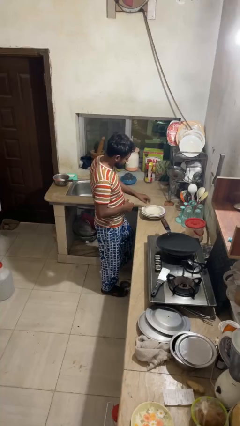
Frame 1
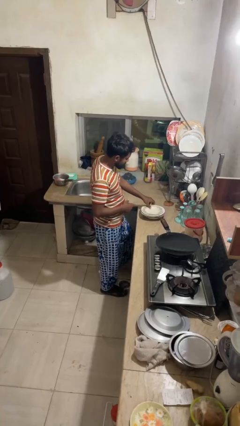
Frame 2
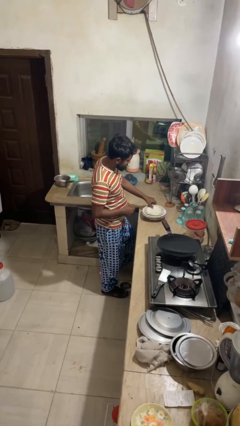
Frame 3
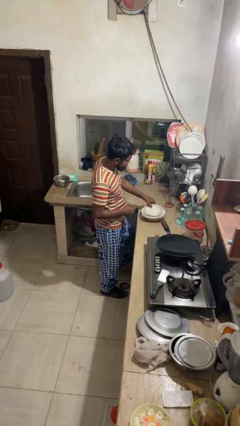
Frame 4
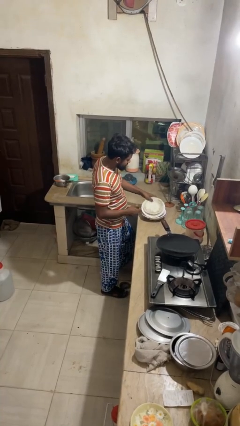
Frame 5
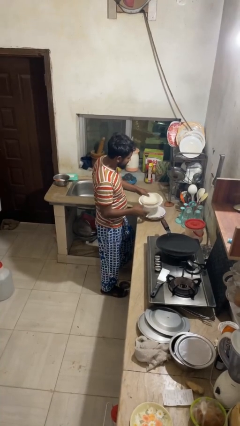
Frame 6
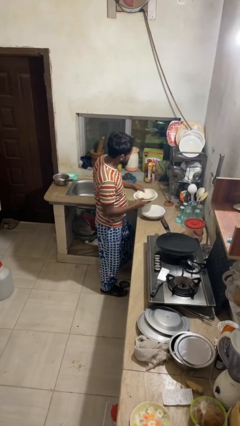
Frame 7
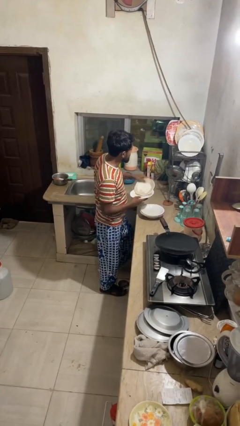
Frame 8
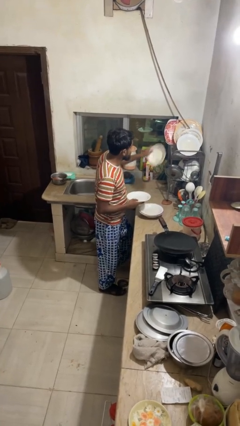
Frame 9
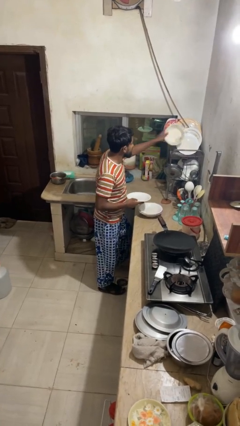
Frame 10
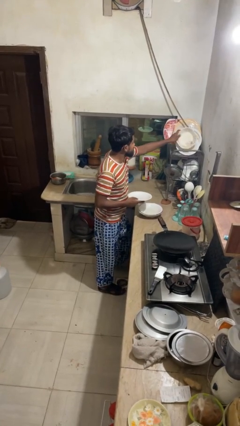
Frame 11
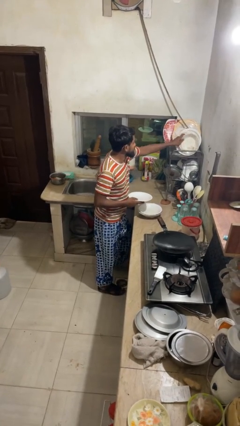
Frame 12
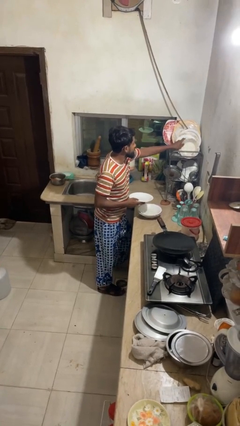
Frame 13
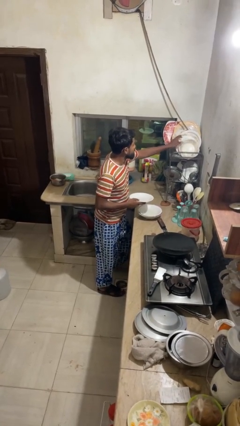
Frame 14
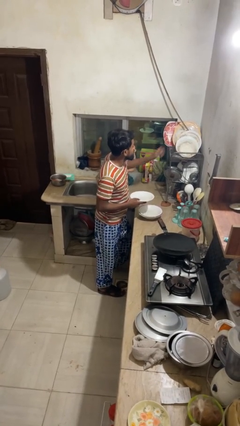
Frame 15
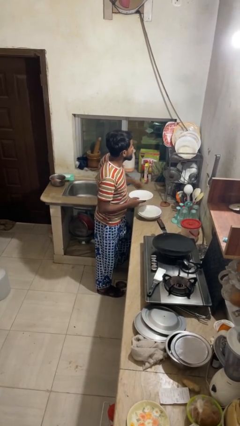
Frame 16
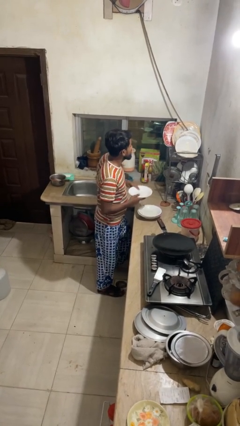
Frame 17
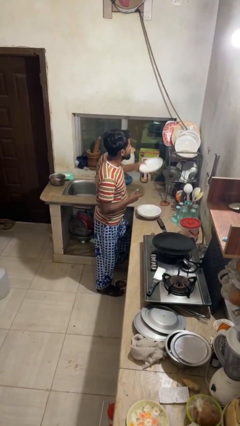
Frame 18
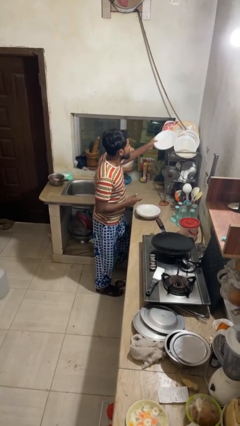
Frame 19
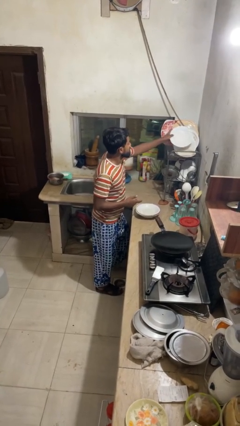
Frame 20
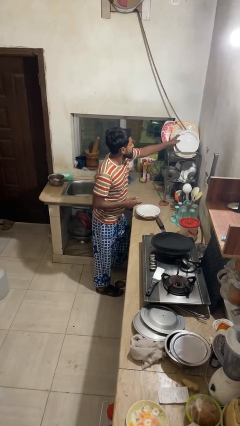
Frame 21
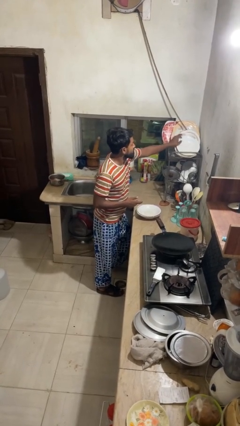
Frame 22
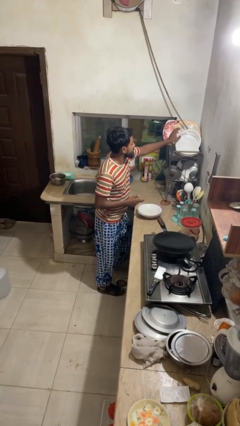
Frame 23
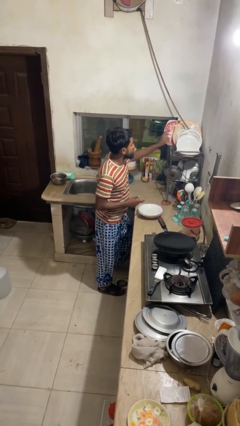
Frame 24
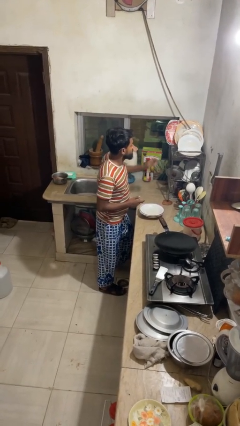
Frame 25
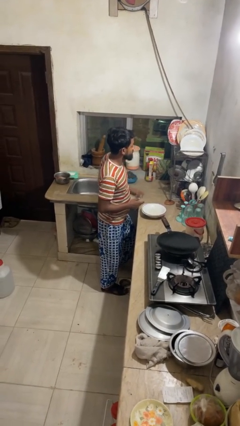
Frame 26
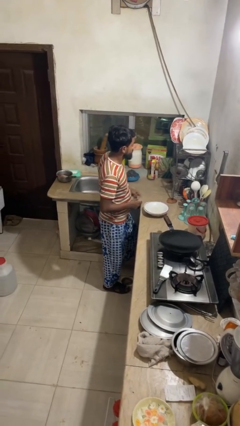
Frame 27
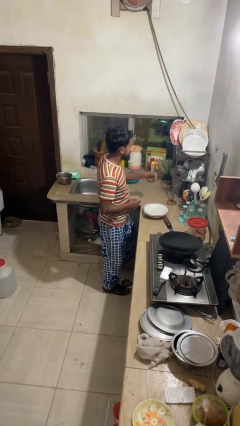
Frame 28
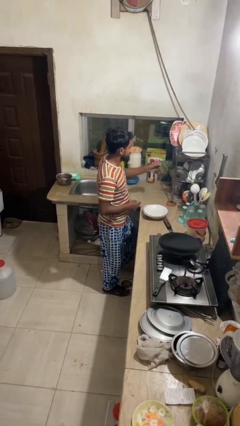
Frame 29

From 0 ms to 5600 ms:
person loads dishwasher

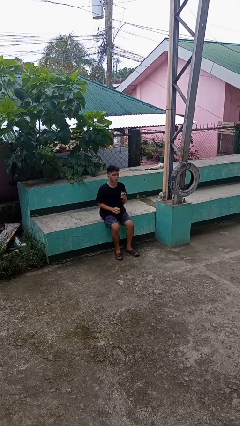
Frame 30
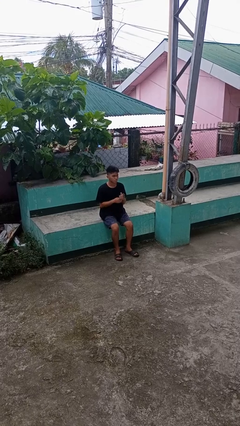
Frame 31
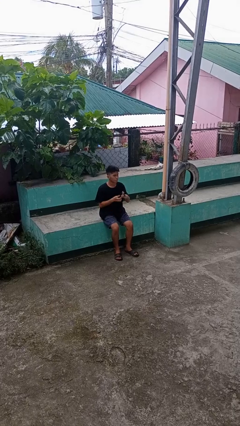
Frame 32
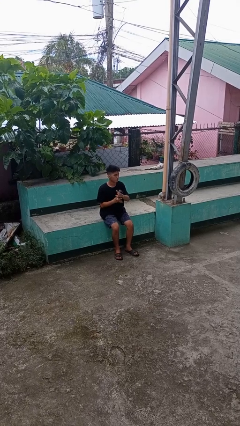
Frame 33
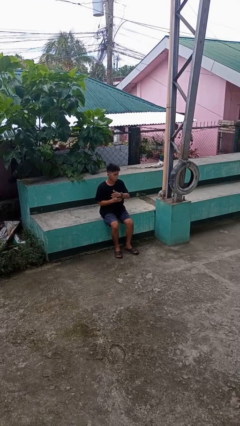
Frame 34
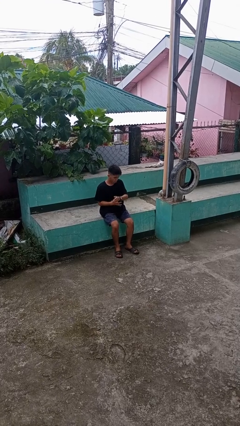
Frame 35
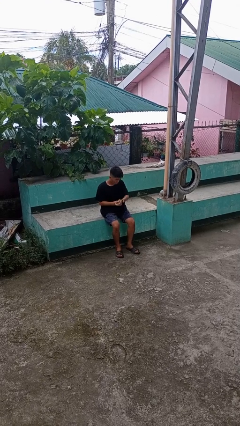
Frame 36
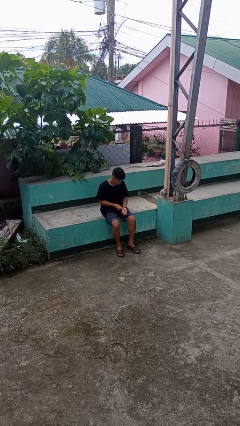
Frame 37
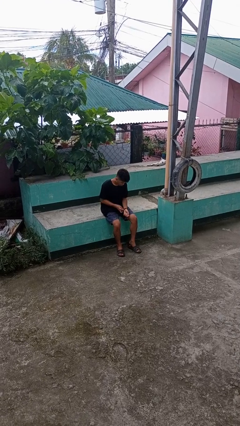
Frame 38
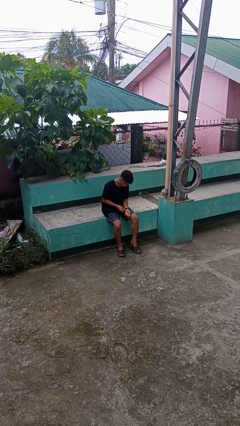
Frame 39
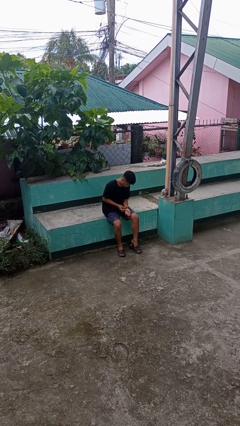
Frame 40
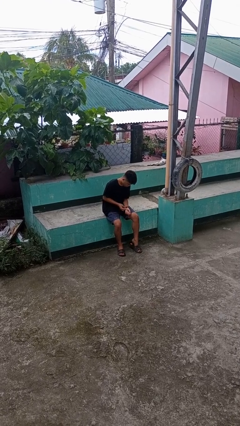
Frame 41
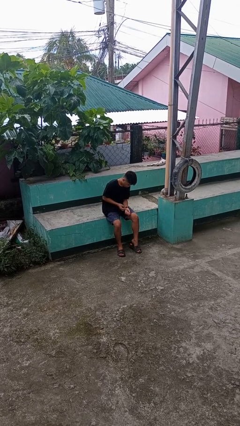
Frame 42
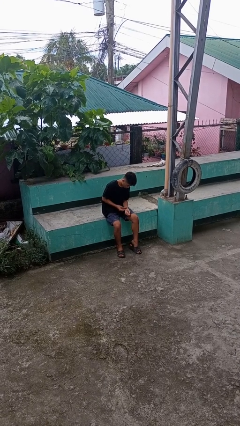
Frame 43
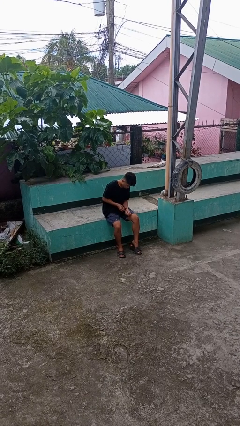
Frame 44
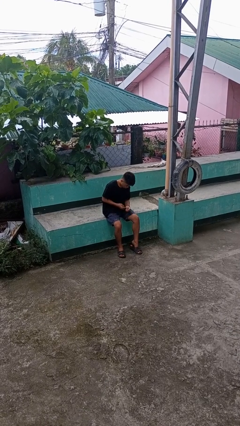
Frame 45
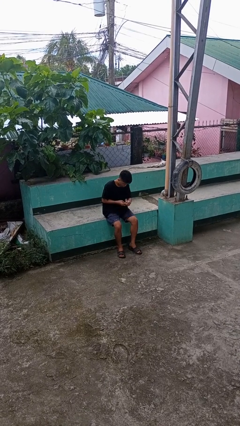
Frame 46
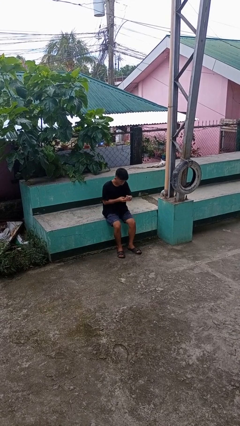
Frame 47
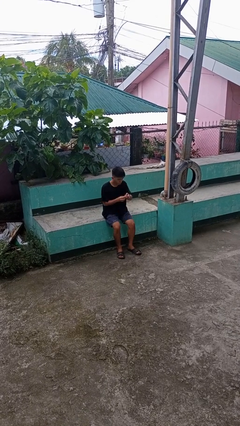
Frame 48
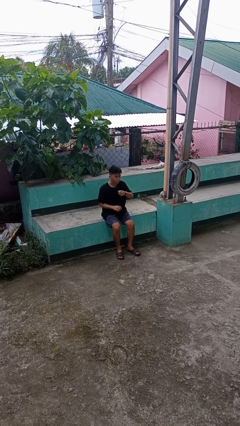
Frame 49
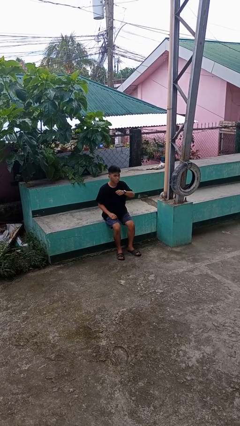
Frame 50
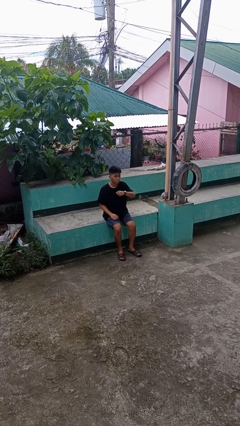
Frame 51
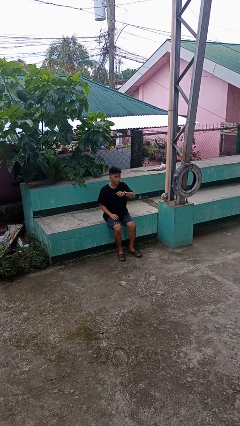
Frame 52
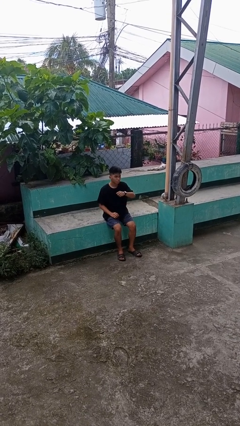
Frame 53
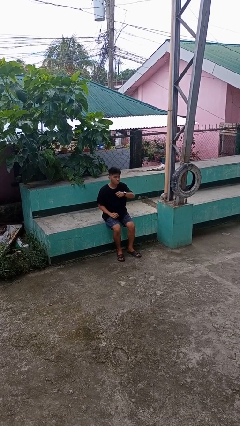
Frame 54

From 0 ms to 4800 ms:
person puts on wristwatch

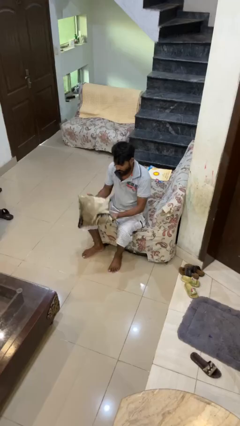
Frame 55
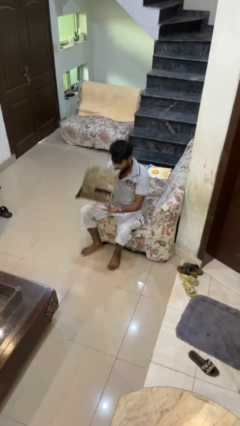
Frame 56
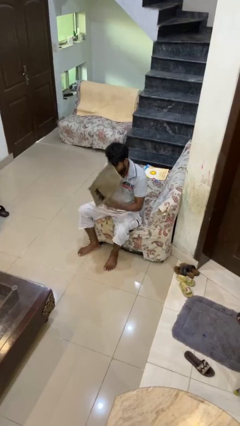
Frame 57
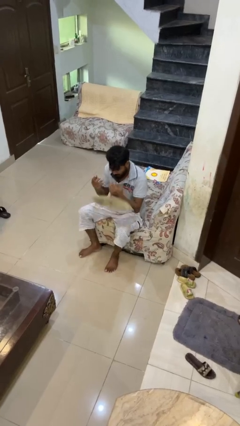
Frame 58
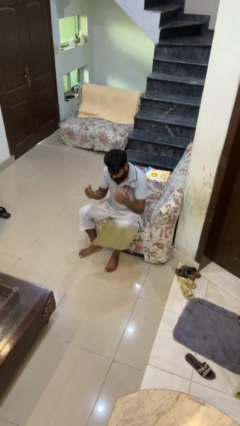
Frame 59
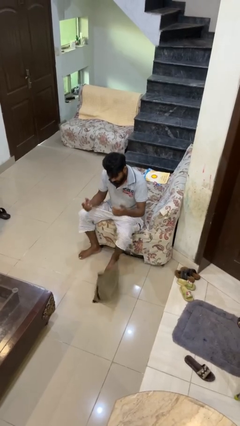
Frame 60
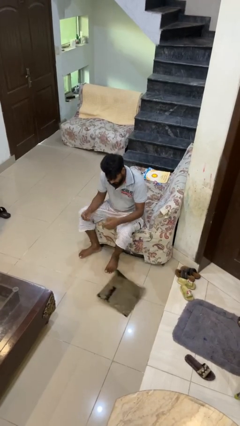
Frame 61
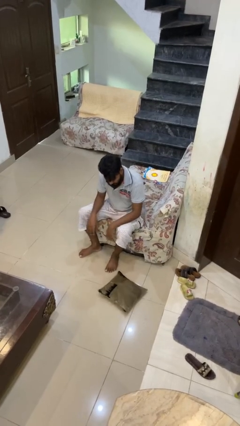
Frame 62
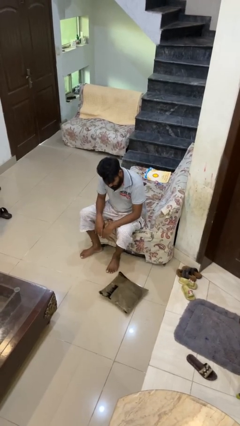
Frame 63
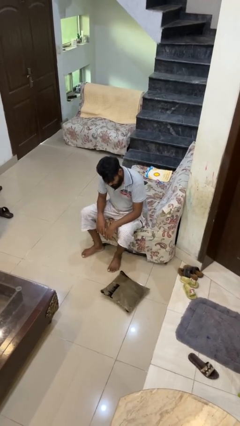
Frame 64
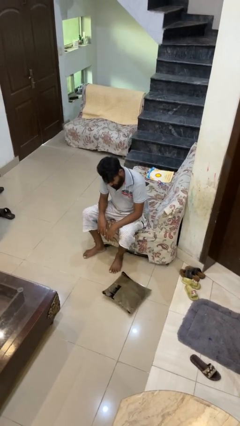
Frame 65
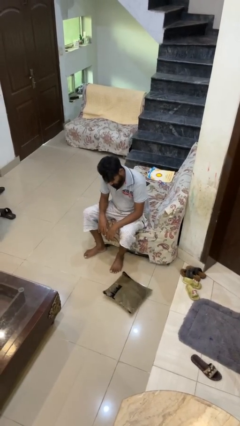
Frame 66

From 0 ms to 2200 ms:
person drops object

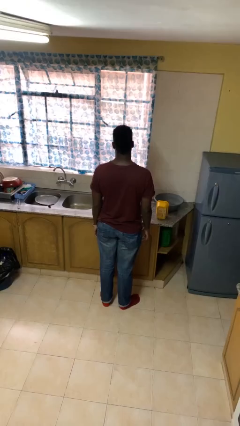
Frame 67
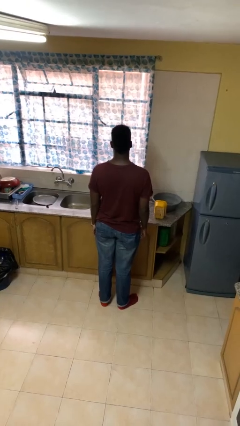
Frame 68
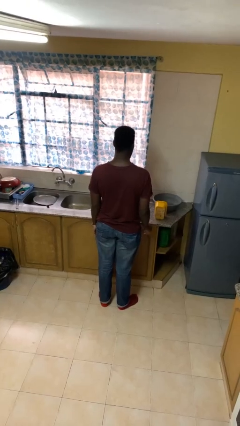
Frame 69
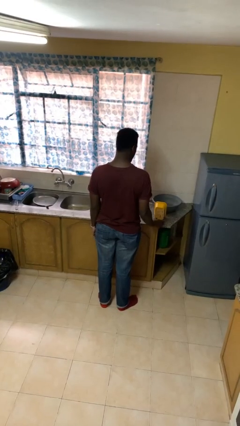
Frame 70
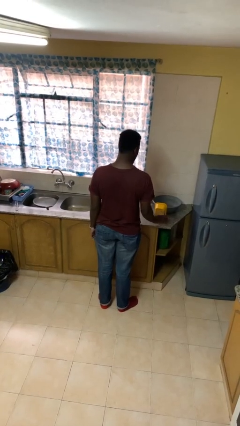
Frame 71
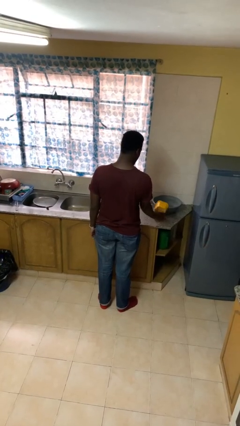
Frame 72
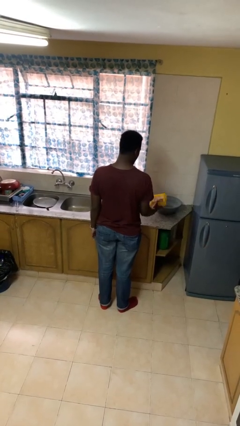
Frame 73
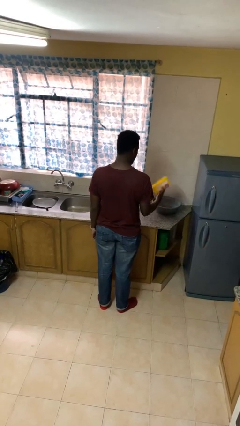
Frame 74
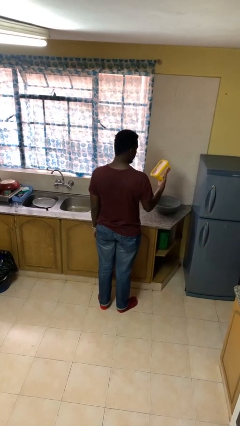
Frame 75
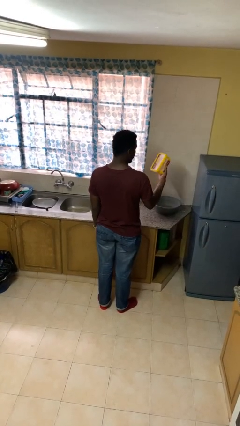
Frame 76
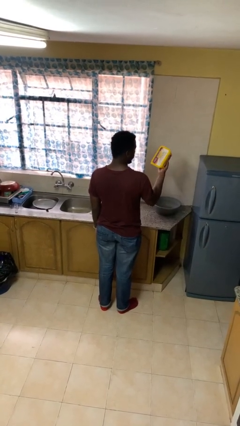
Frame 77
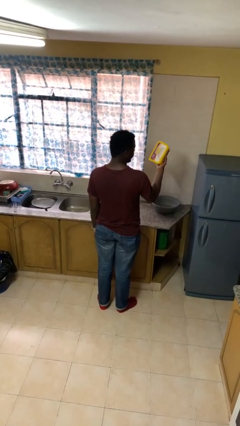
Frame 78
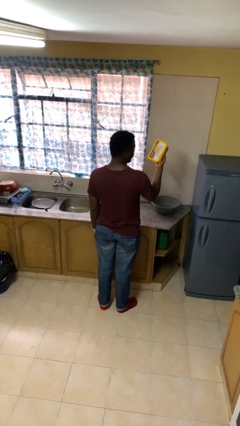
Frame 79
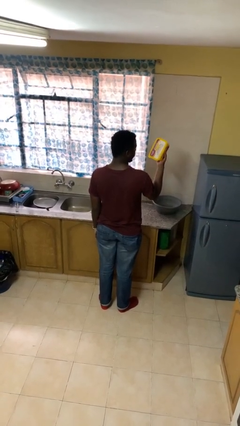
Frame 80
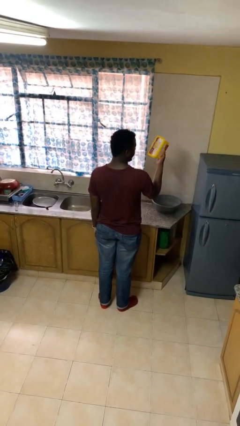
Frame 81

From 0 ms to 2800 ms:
person picks up object from countertop

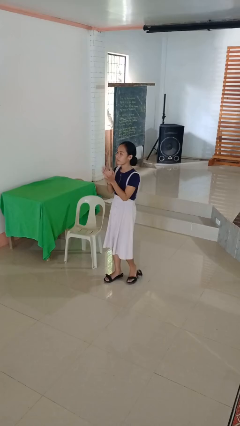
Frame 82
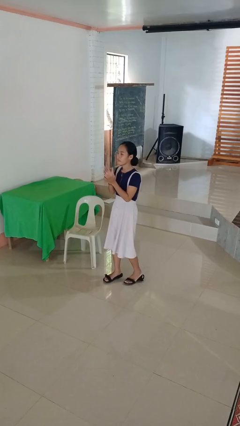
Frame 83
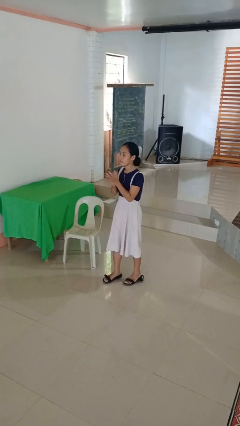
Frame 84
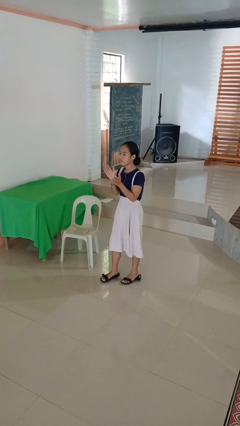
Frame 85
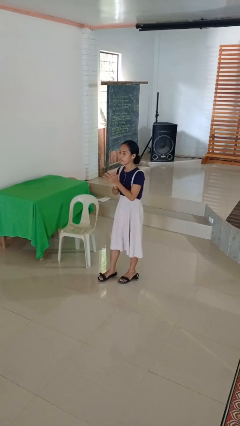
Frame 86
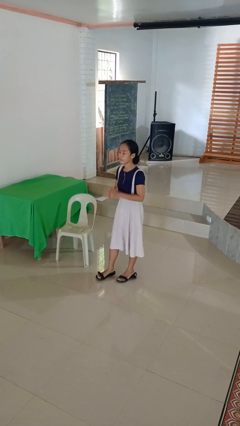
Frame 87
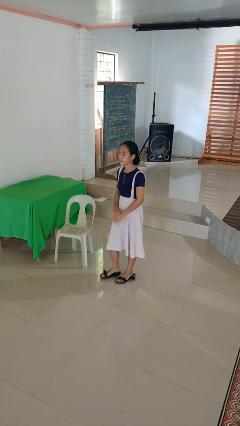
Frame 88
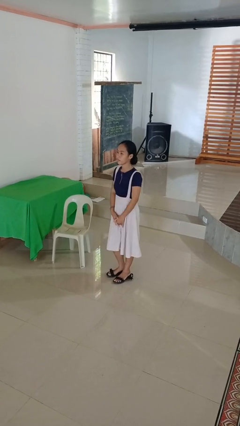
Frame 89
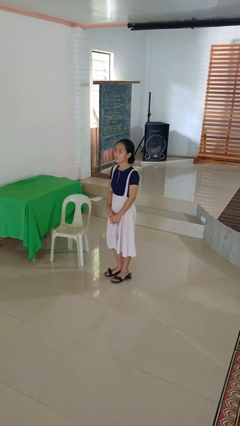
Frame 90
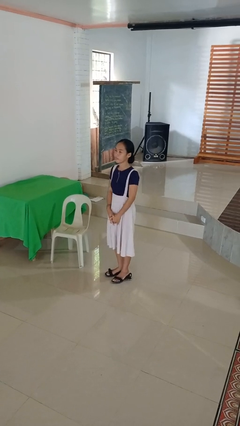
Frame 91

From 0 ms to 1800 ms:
person claps hands

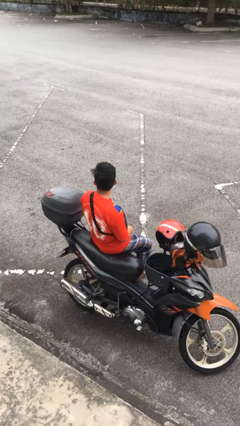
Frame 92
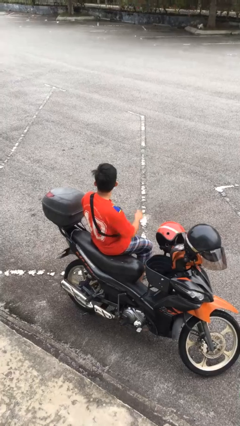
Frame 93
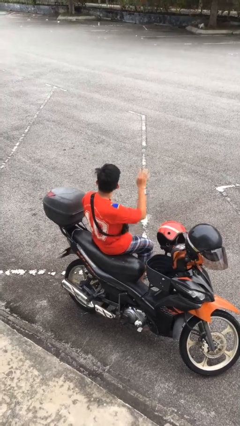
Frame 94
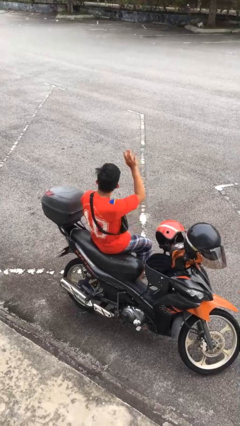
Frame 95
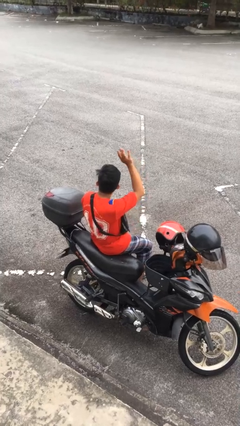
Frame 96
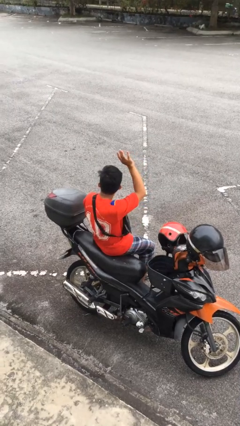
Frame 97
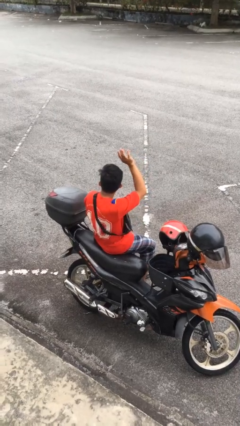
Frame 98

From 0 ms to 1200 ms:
person gestures raise hand
